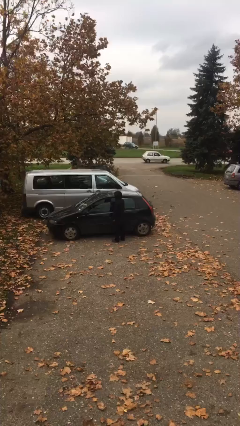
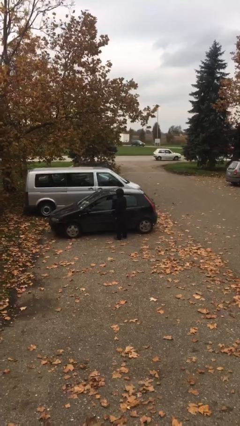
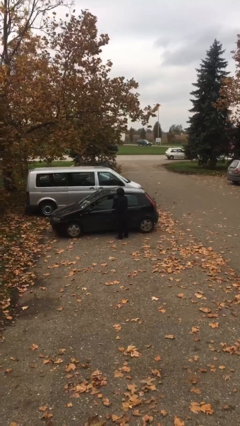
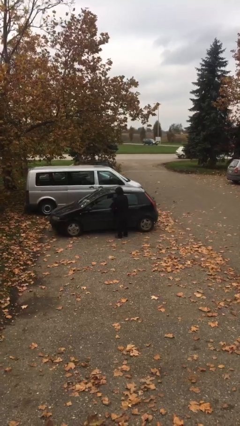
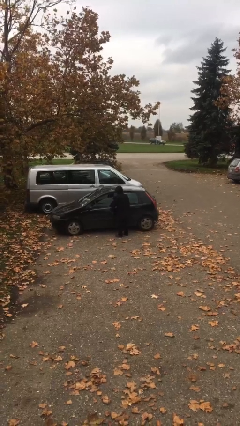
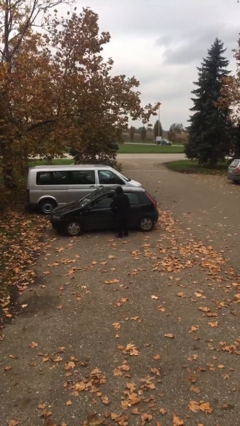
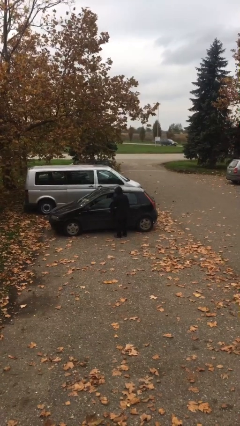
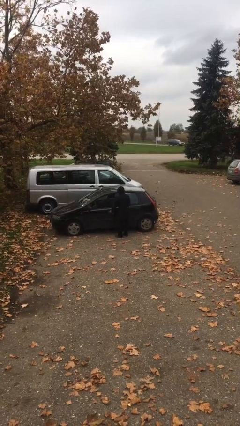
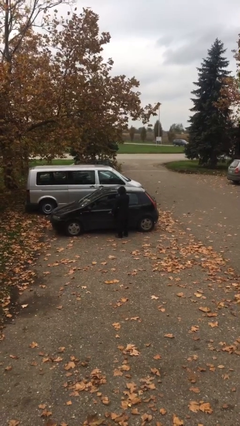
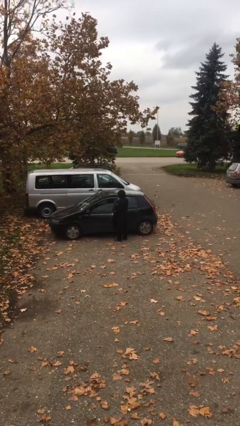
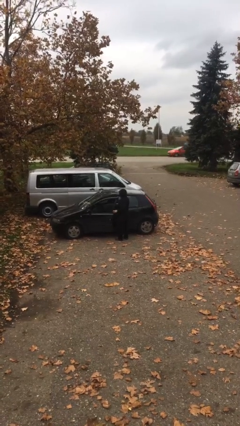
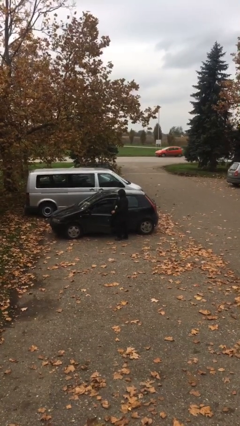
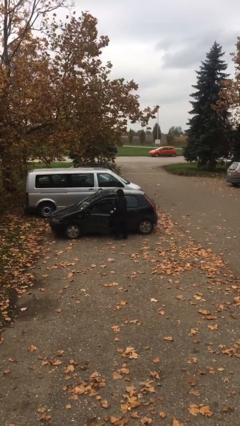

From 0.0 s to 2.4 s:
person opens car door

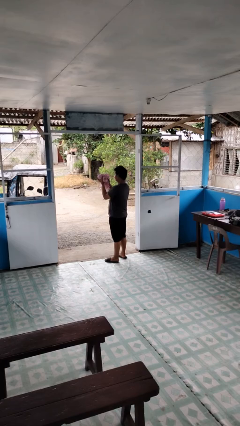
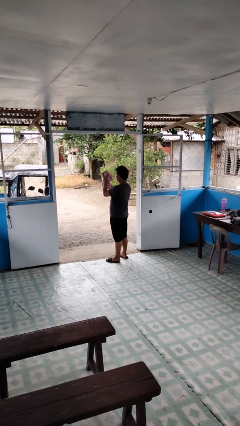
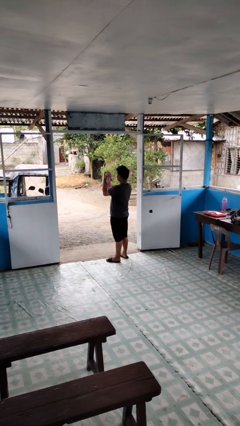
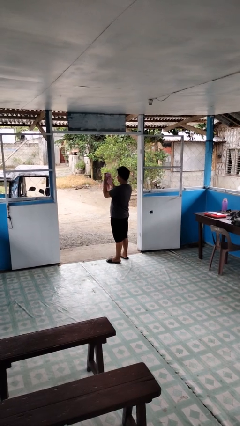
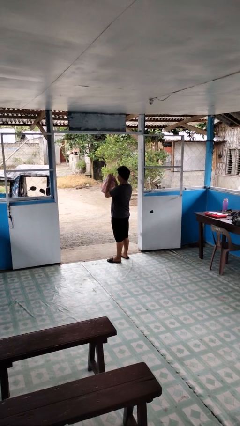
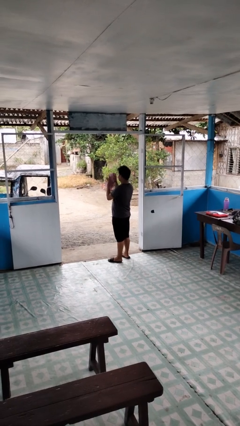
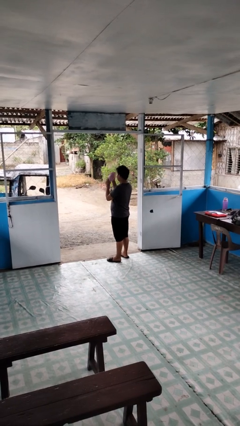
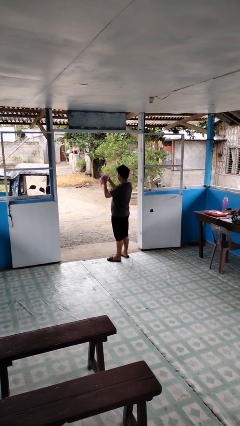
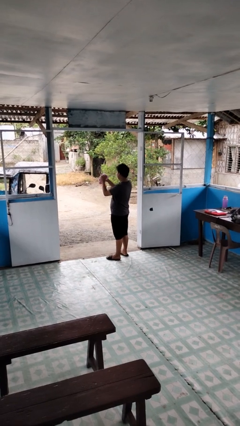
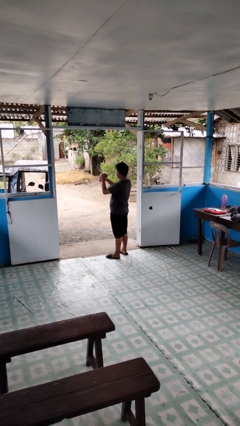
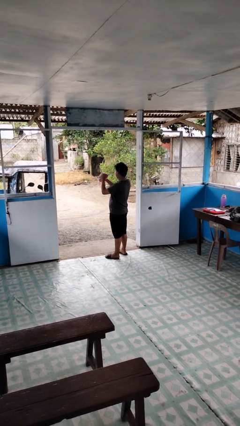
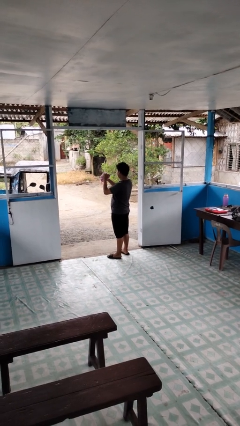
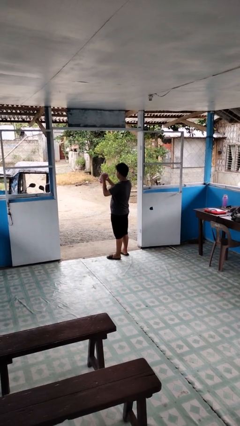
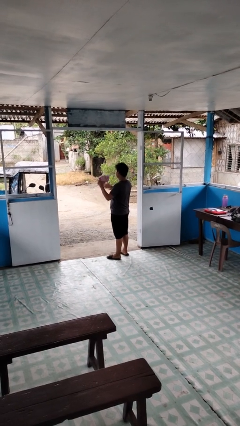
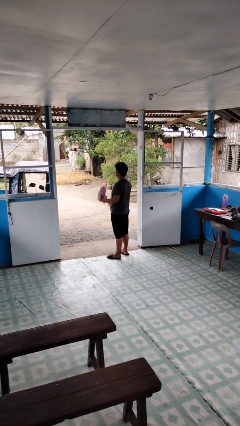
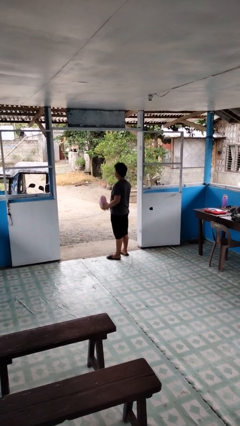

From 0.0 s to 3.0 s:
person squeezes object

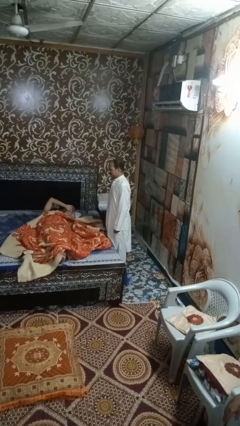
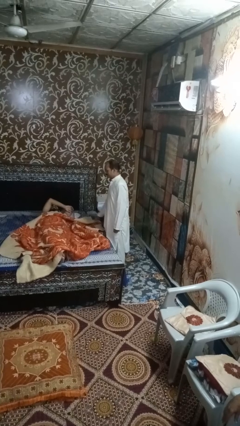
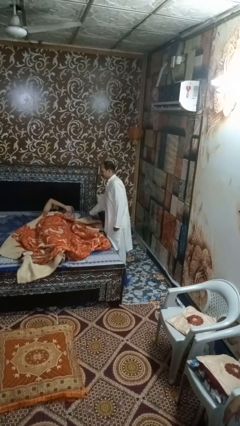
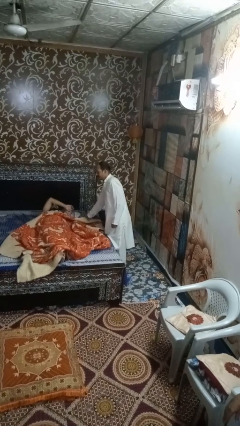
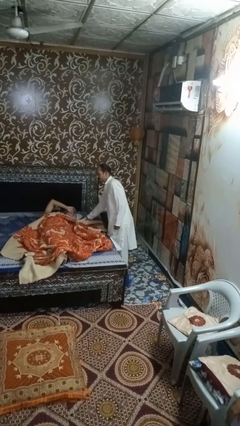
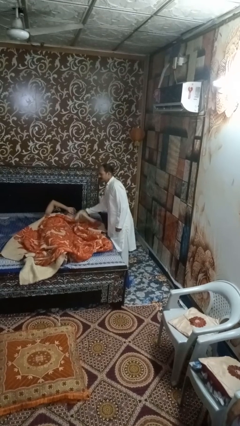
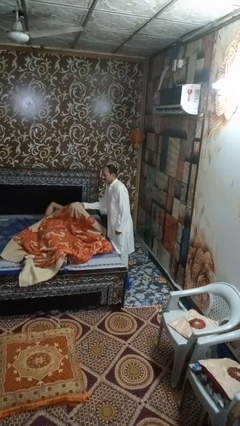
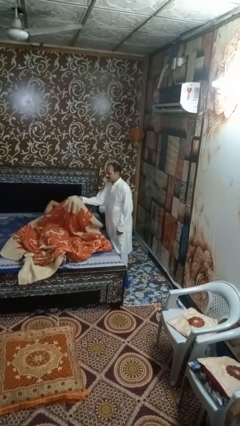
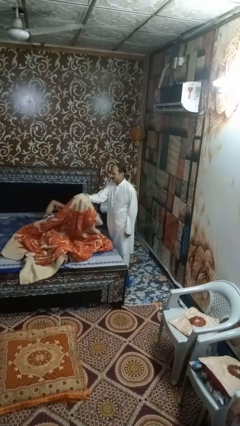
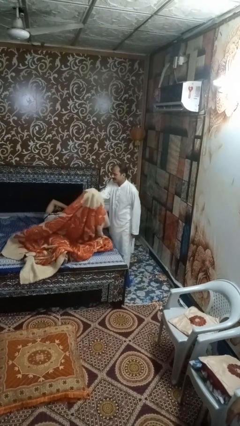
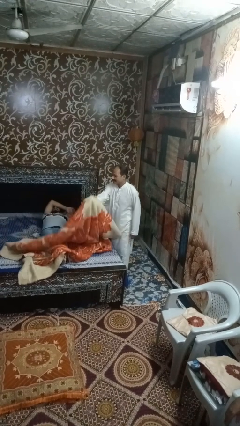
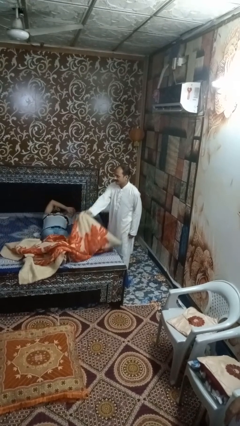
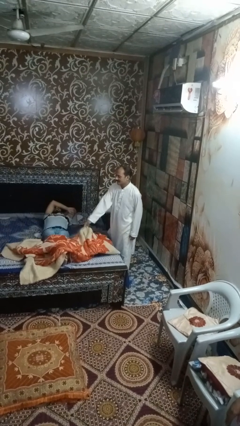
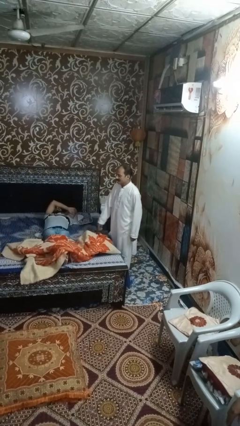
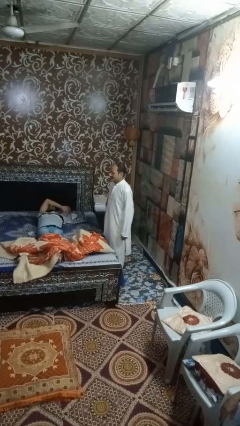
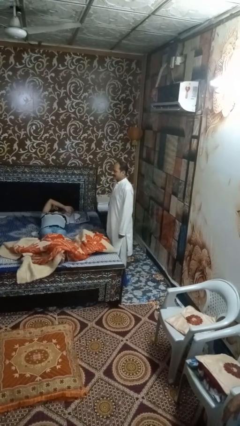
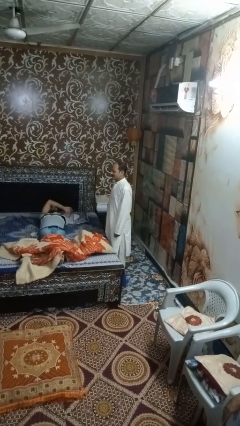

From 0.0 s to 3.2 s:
person uncovers friend with blanket

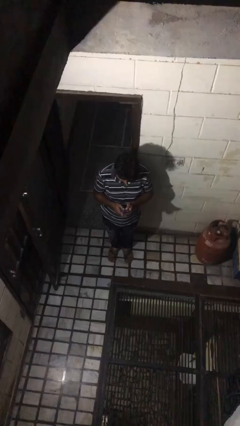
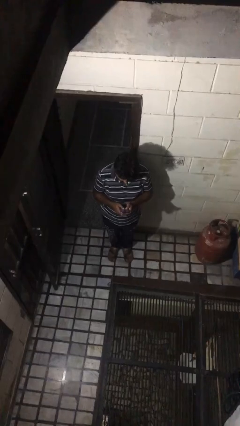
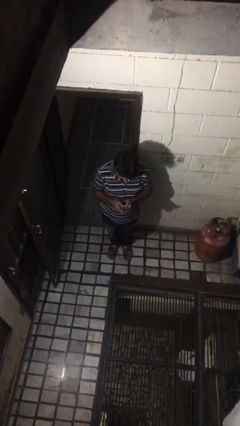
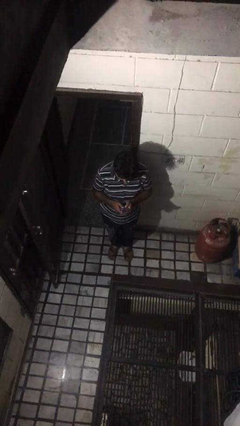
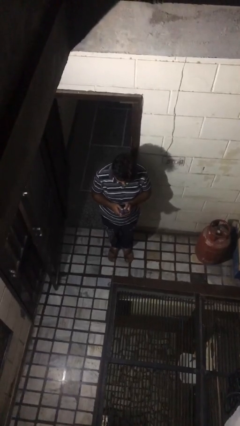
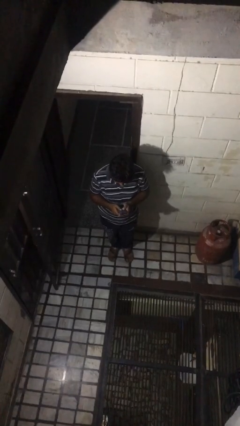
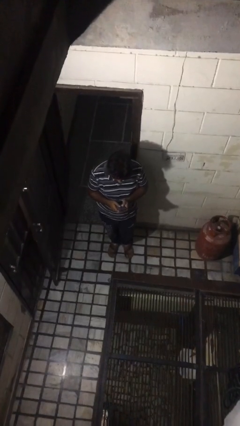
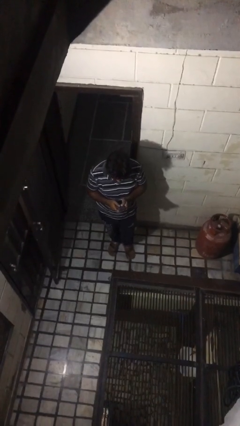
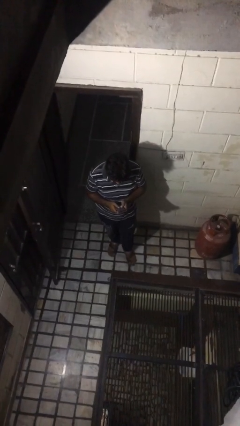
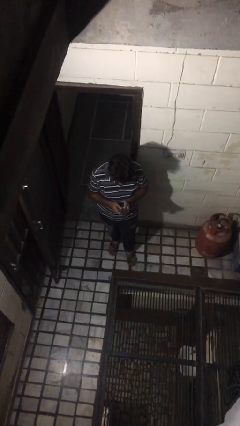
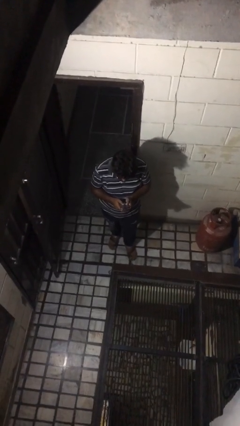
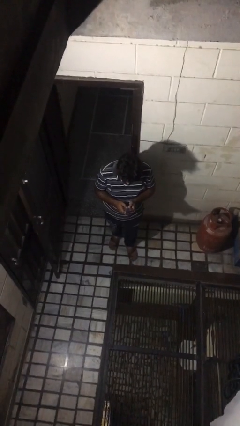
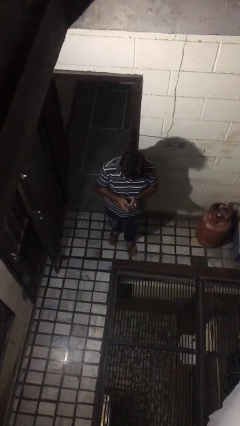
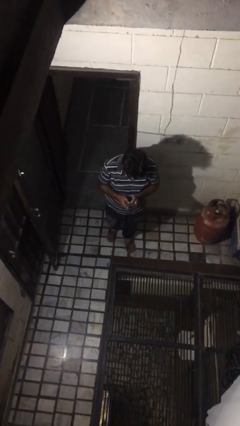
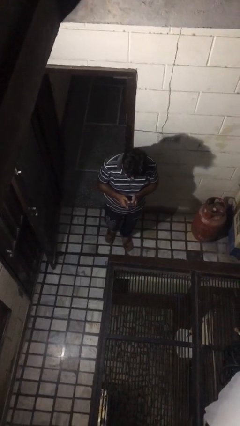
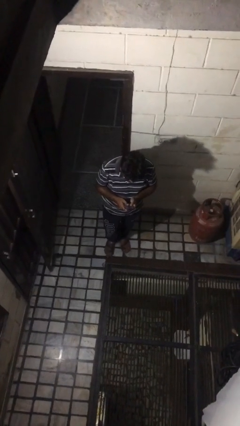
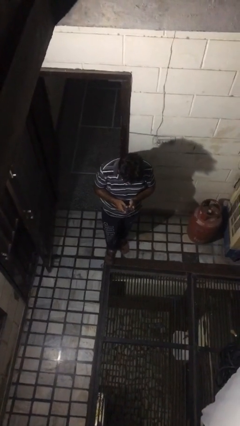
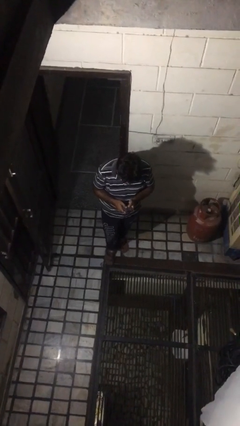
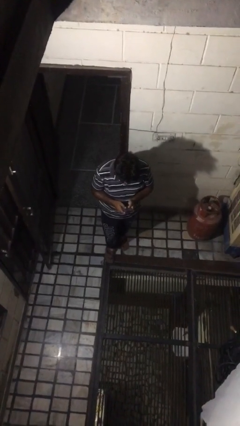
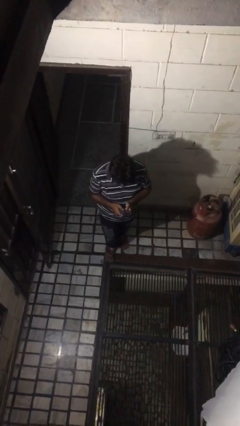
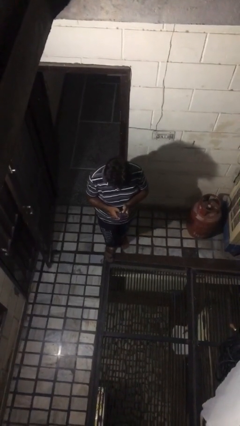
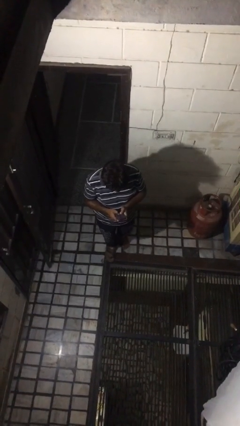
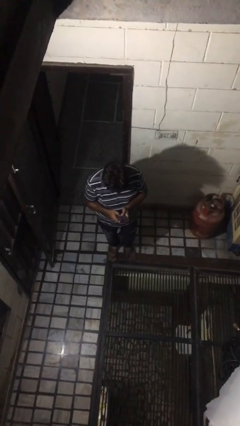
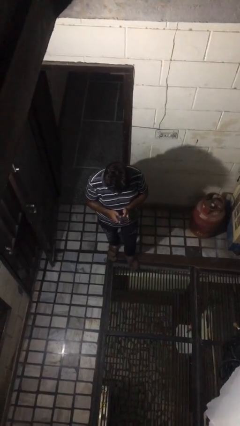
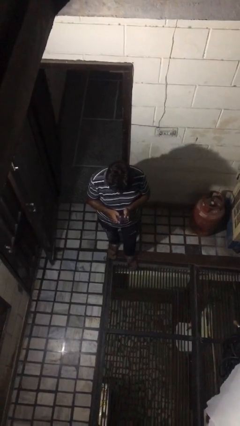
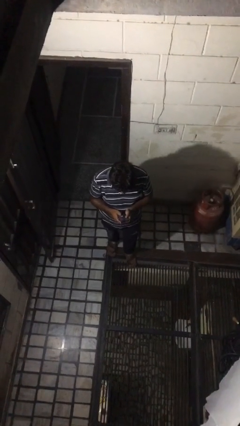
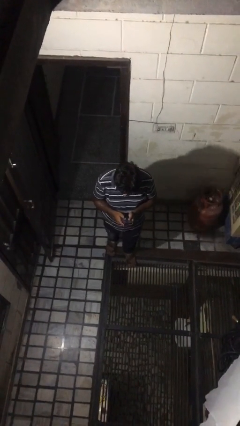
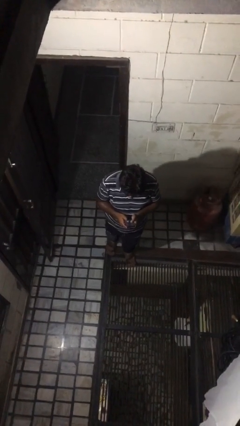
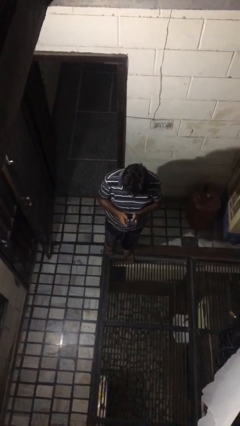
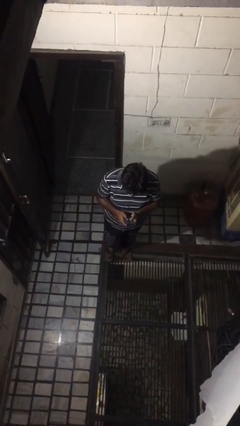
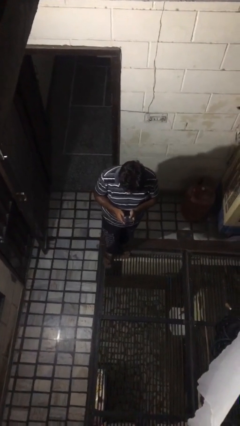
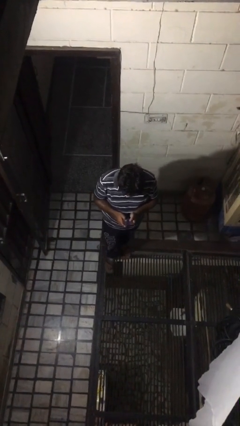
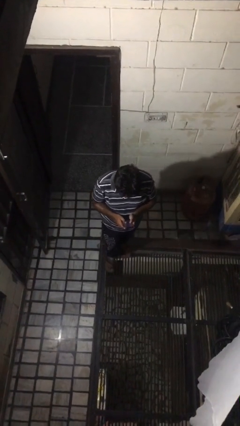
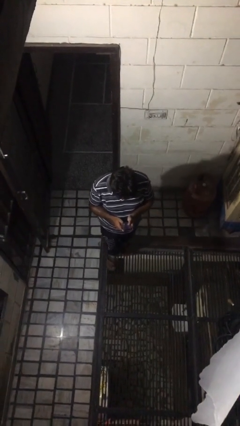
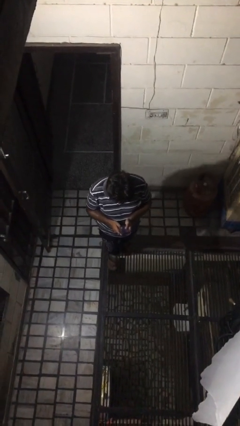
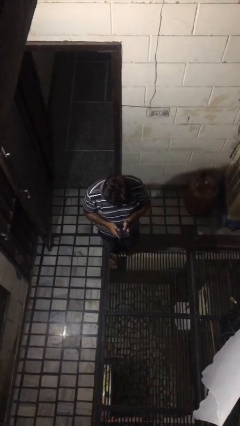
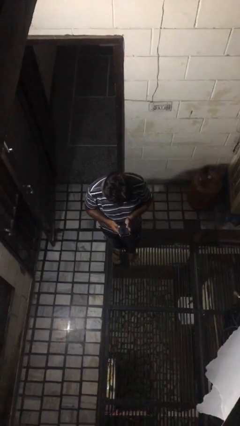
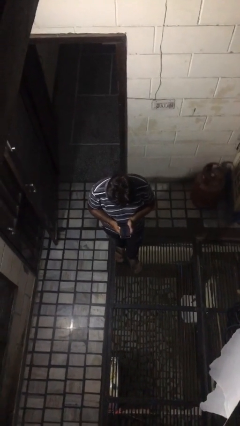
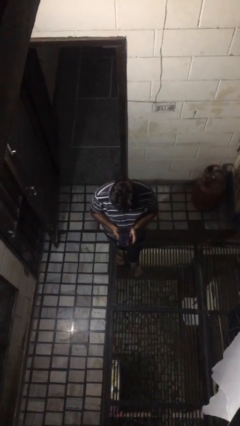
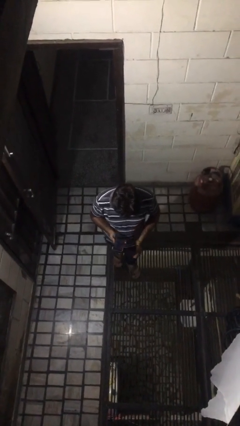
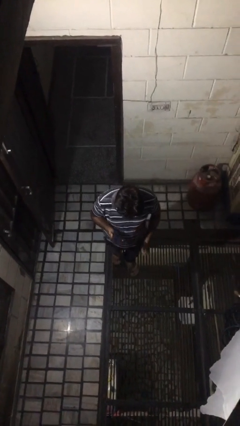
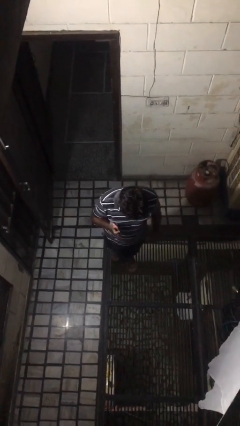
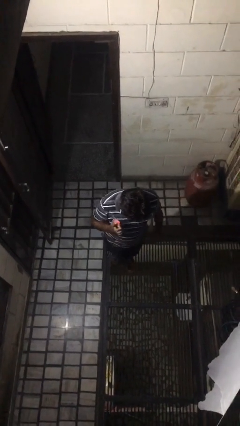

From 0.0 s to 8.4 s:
person texts on phone

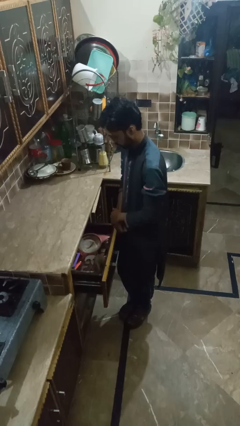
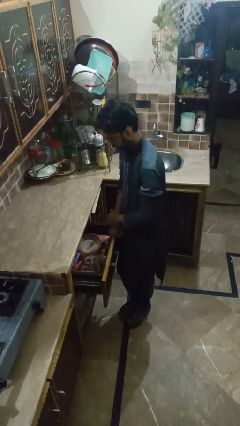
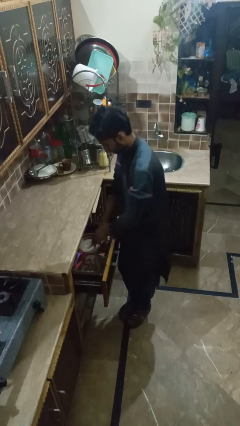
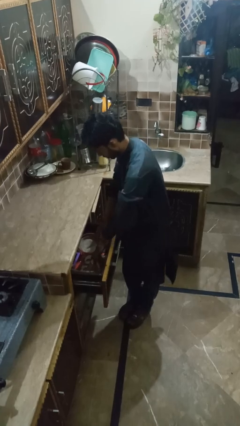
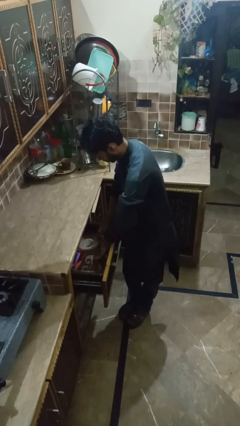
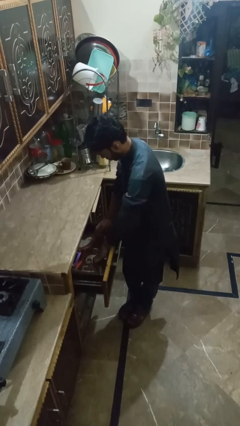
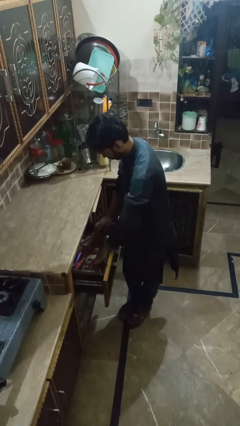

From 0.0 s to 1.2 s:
person searches in kitchen drawer
